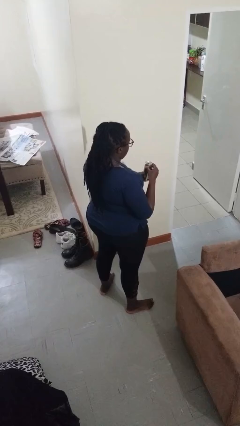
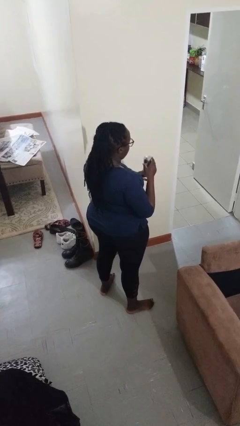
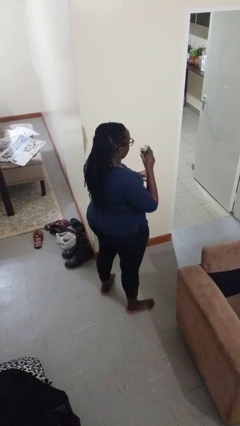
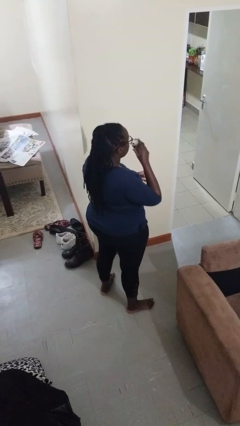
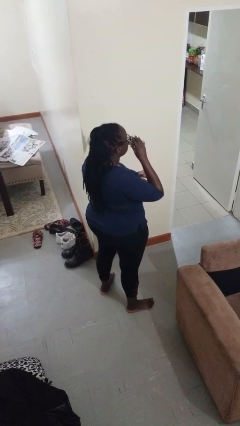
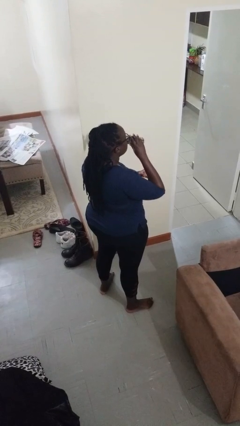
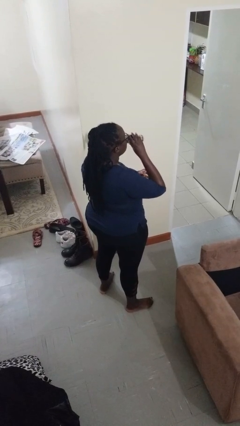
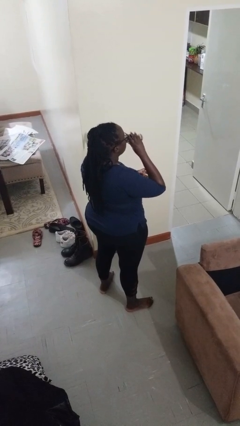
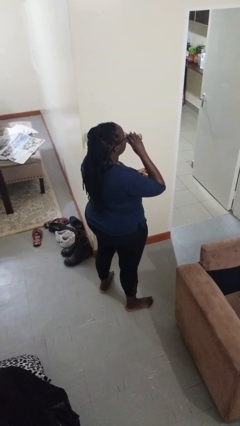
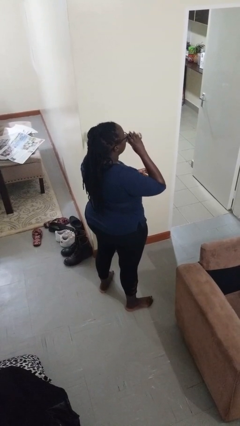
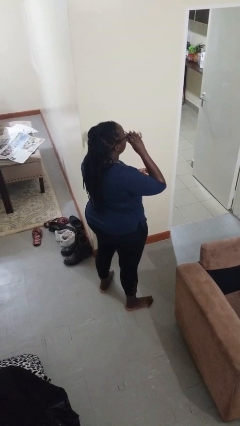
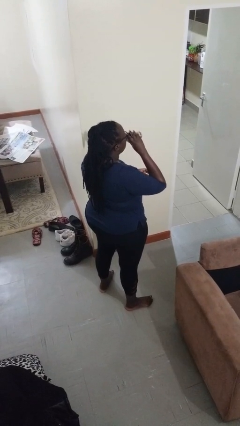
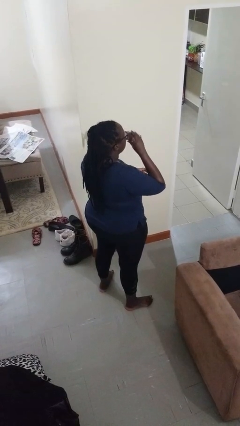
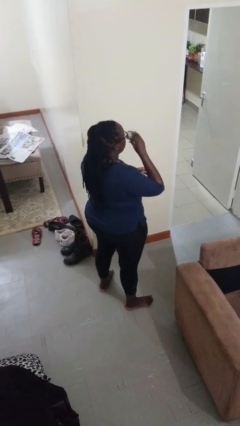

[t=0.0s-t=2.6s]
person drinks from beverage can

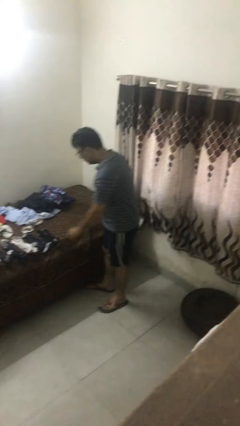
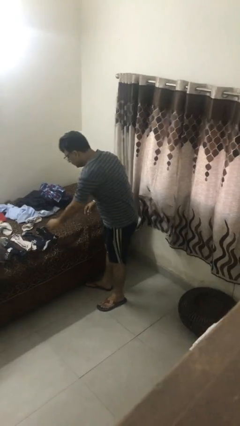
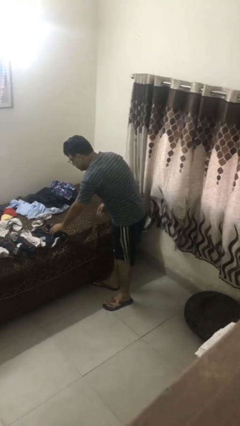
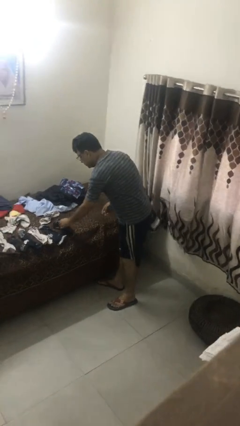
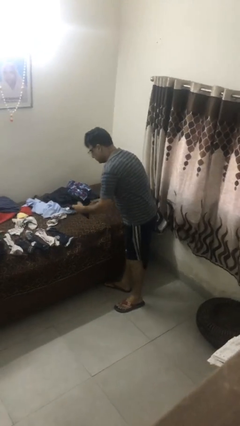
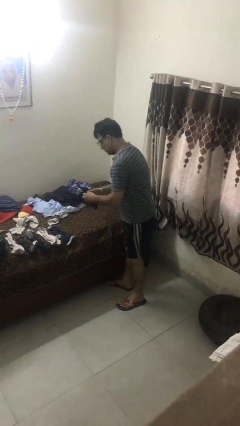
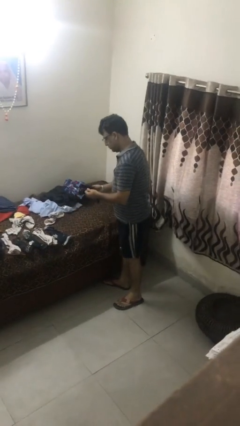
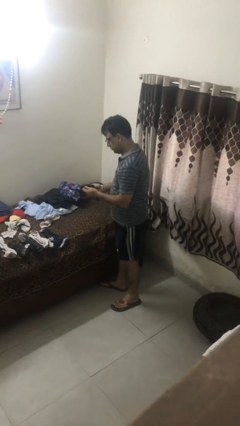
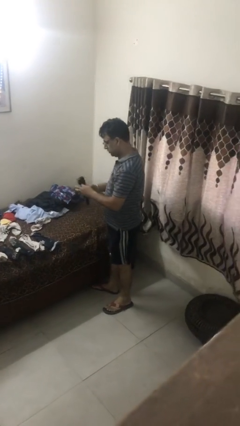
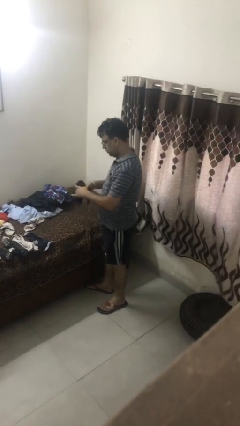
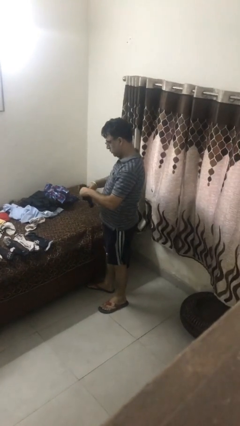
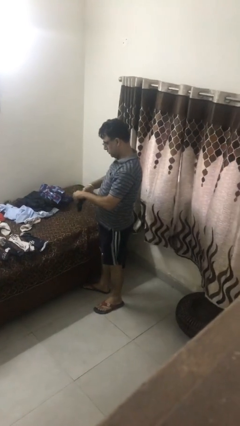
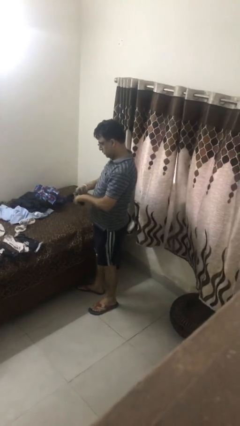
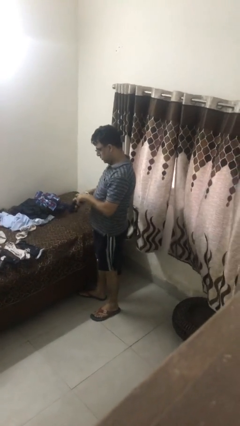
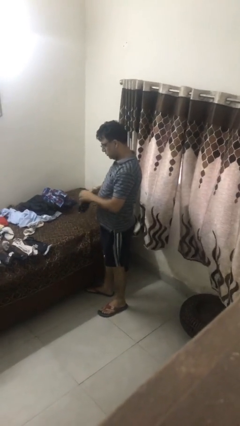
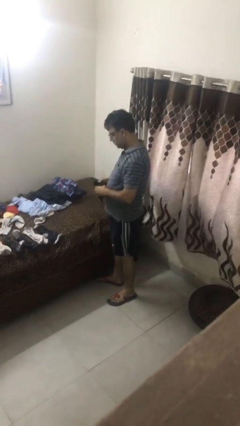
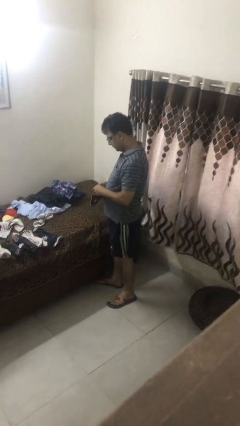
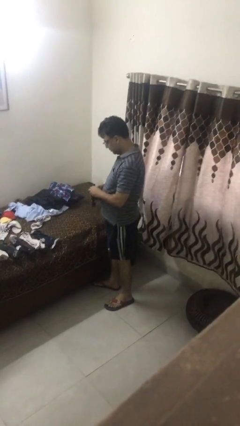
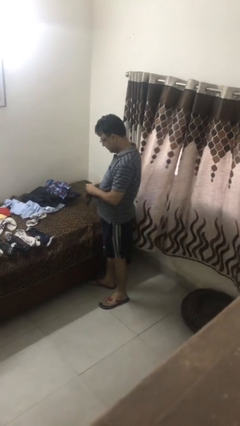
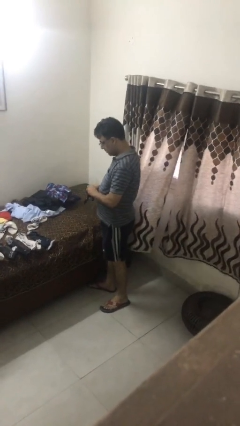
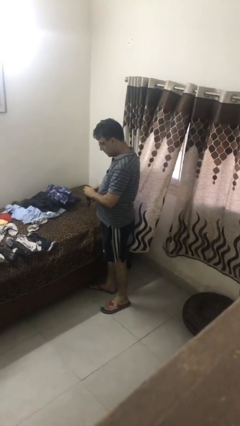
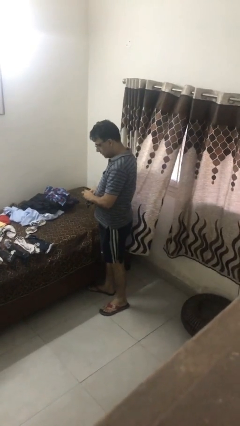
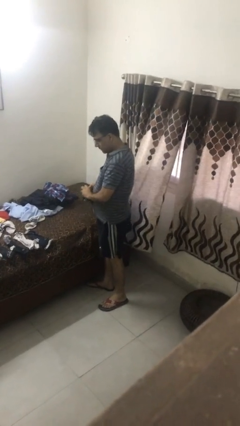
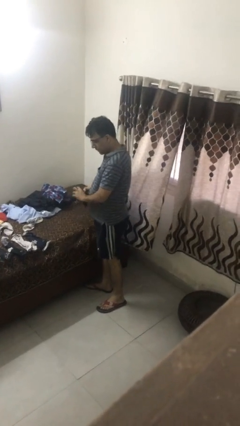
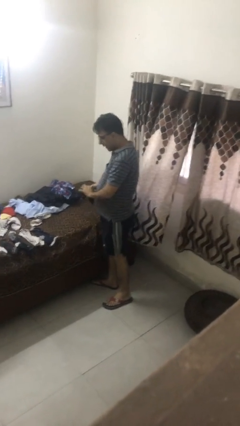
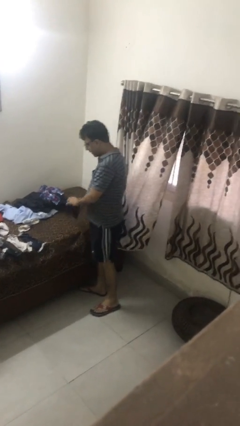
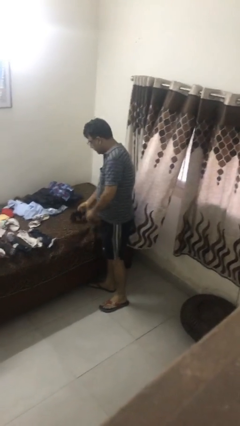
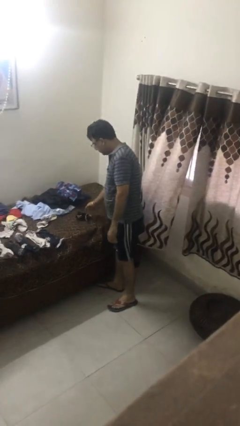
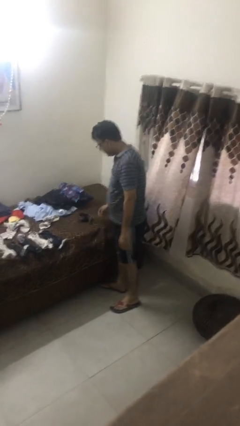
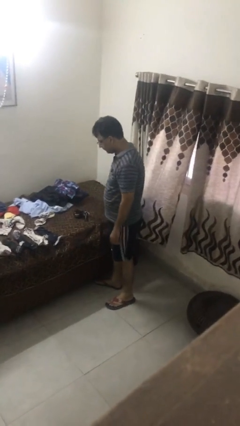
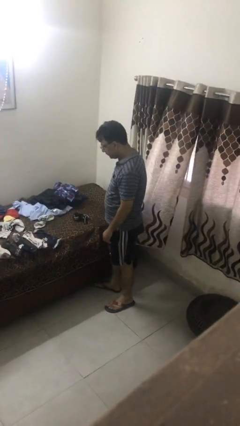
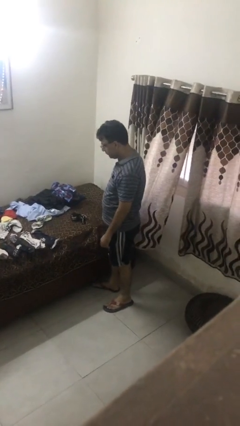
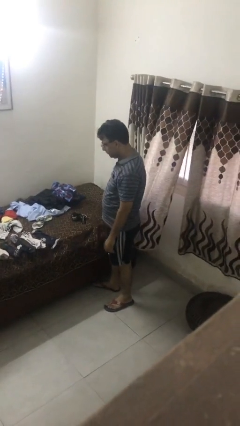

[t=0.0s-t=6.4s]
person folds socks

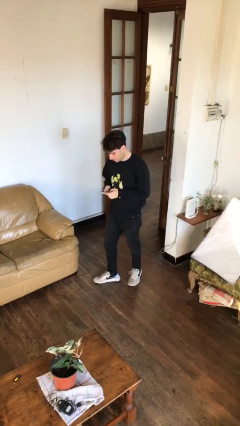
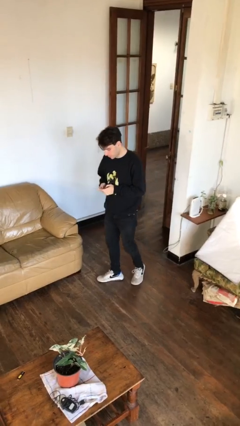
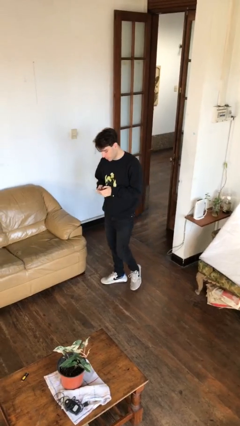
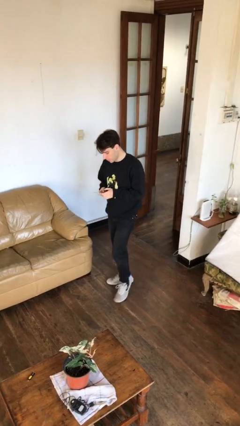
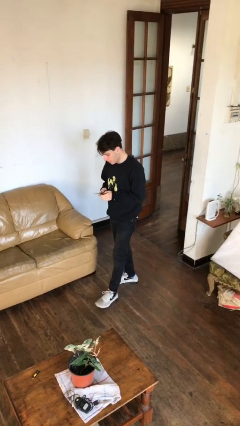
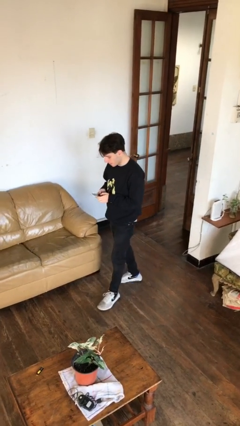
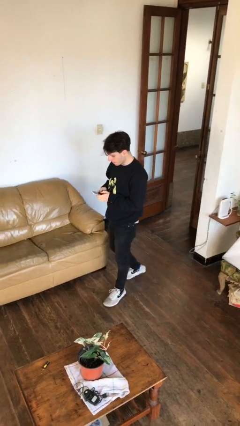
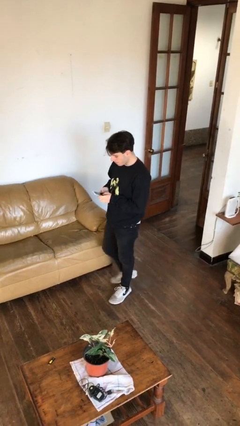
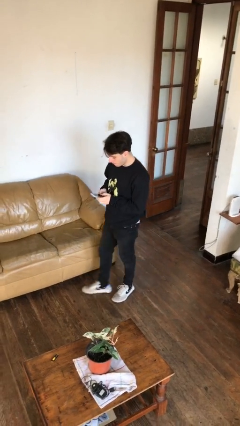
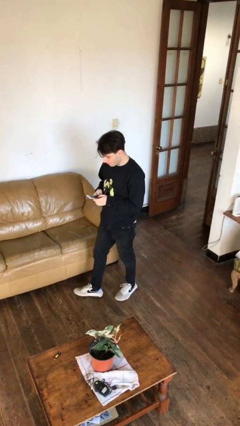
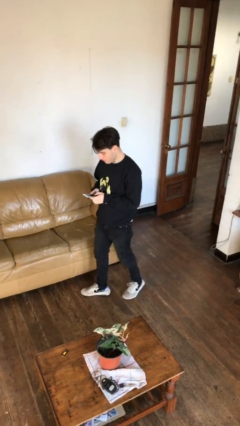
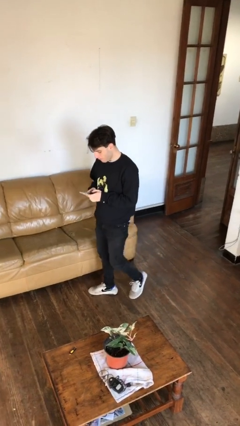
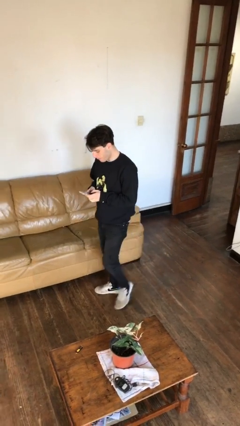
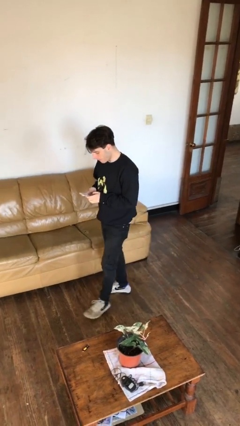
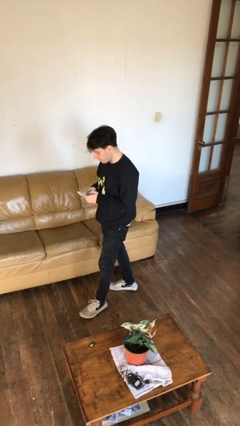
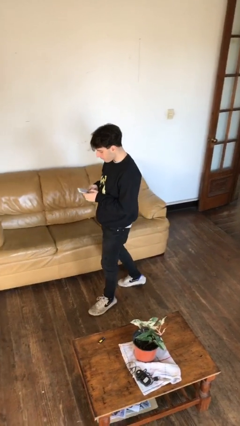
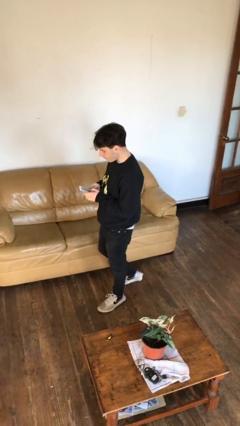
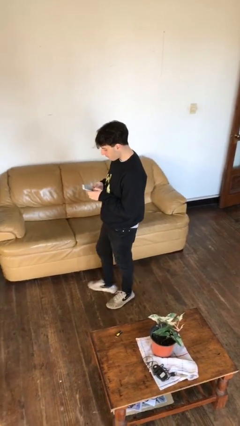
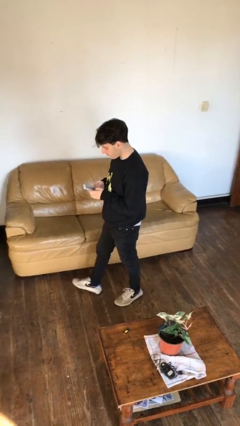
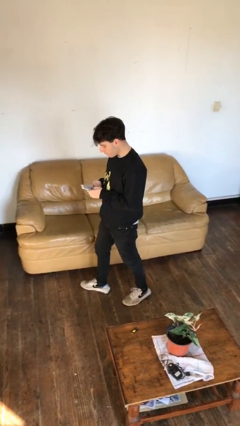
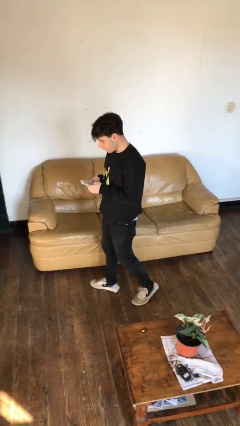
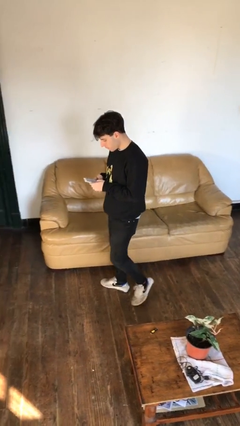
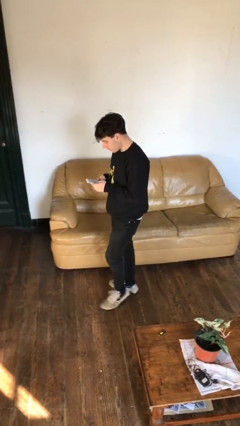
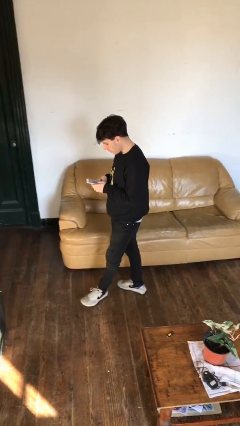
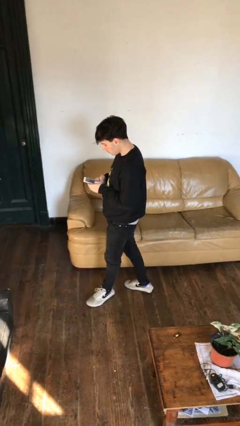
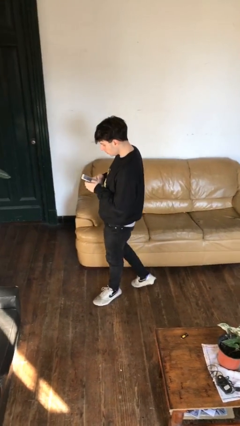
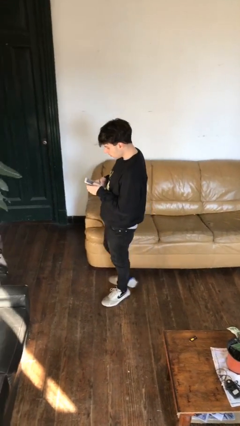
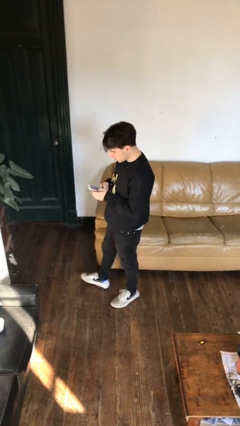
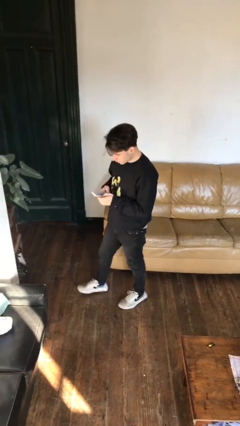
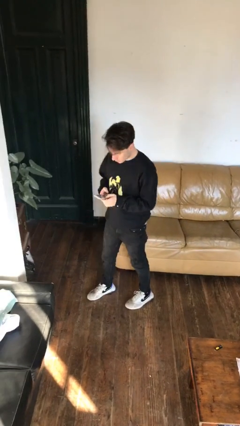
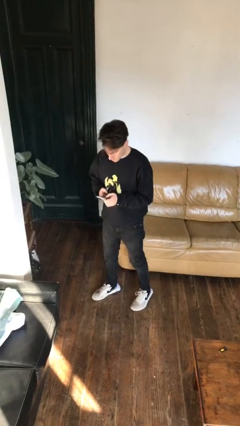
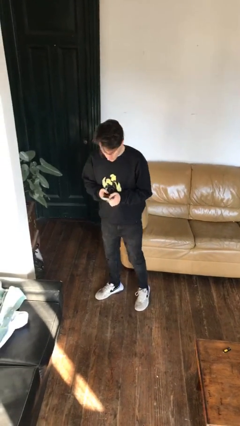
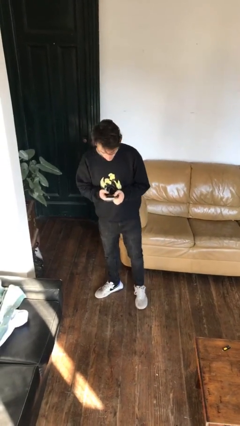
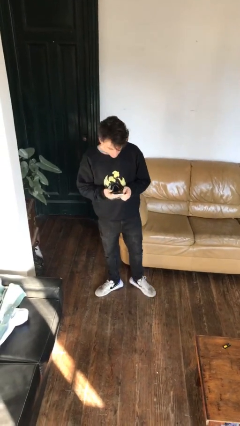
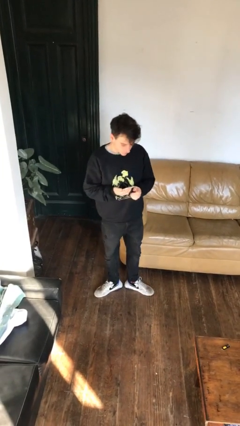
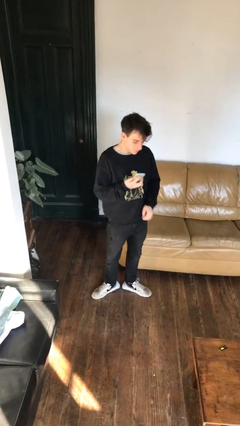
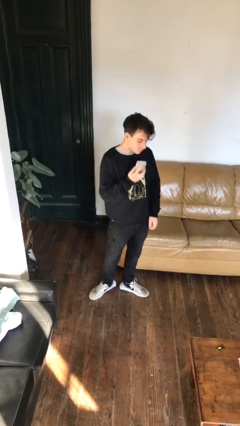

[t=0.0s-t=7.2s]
person texts on phone

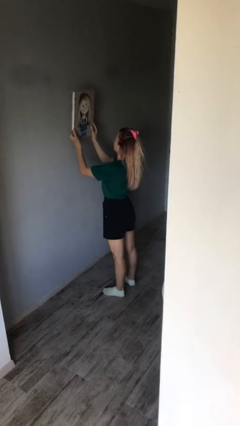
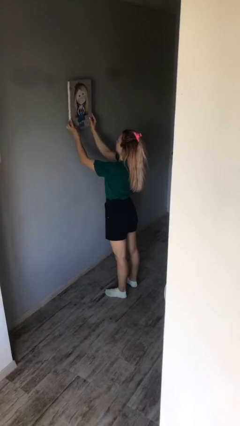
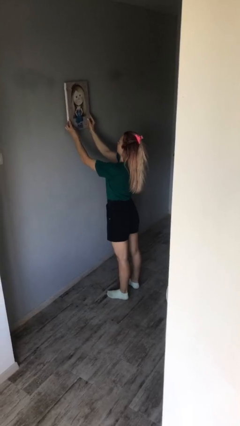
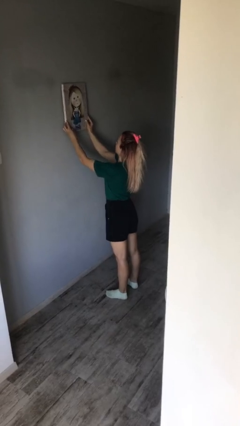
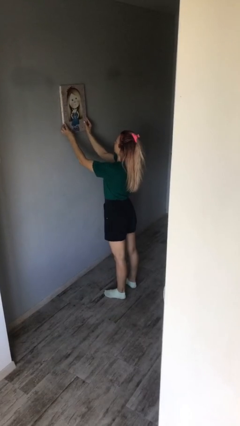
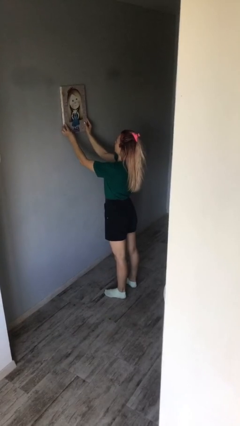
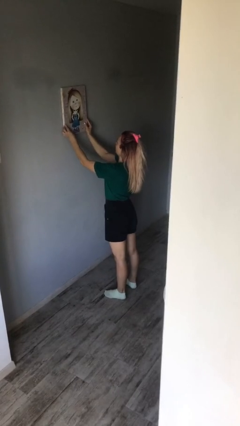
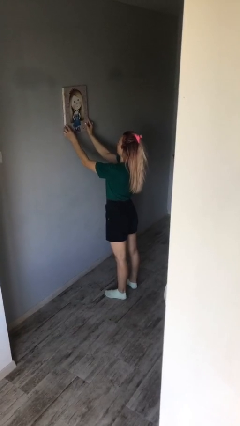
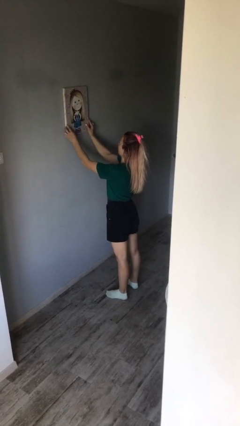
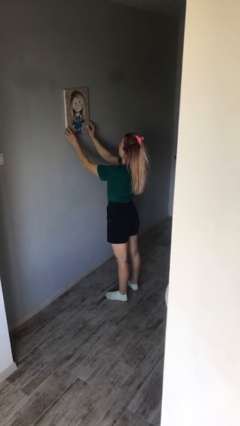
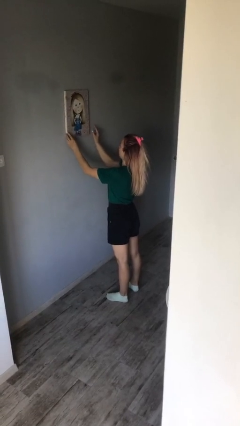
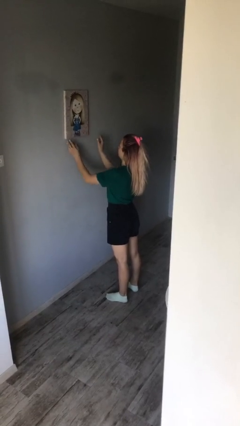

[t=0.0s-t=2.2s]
person puts up picture frame
